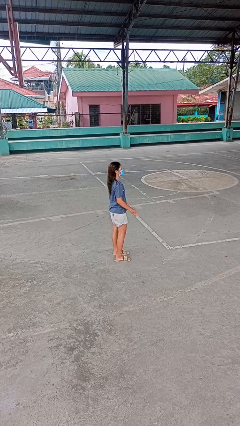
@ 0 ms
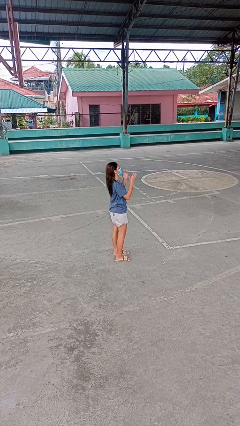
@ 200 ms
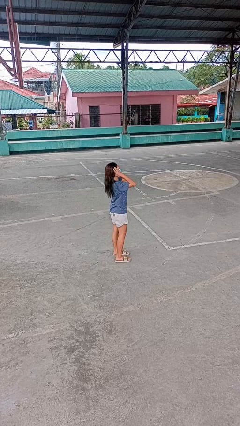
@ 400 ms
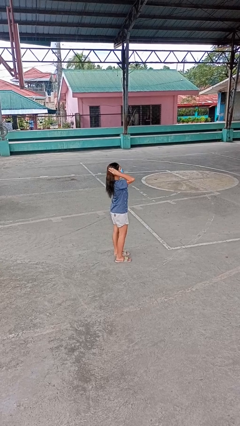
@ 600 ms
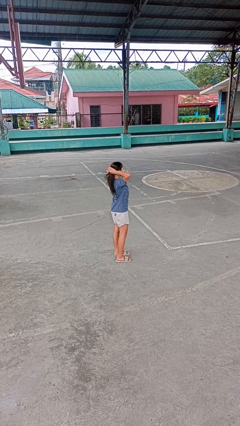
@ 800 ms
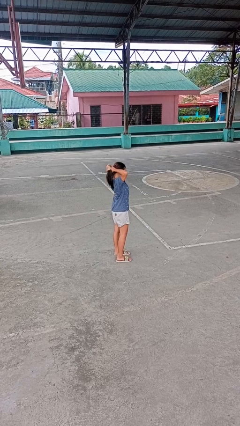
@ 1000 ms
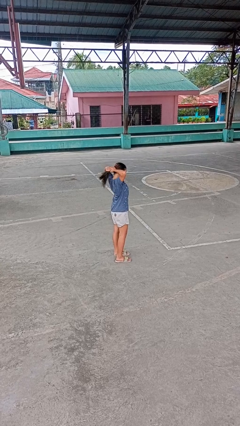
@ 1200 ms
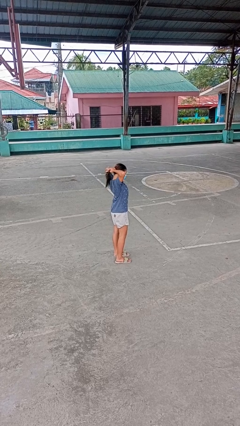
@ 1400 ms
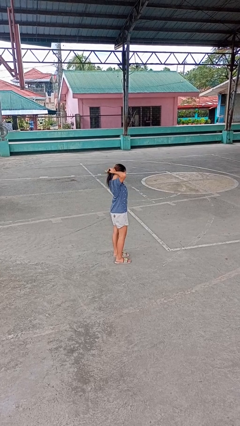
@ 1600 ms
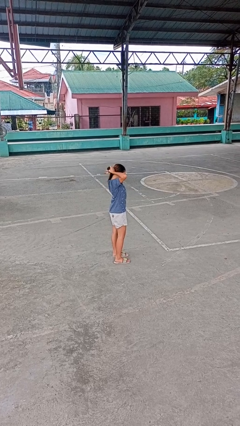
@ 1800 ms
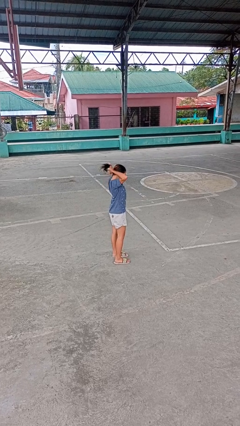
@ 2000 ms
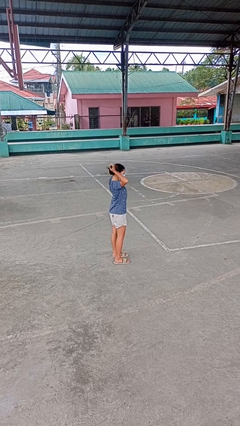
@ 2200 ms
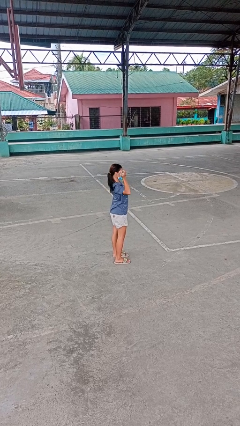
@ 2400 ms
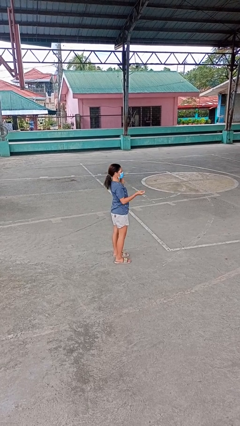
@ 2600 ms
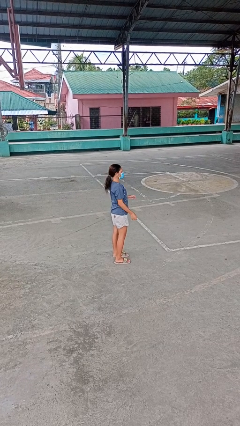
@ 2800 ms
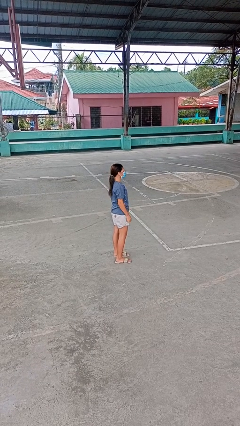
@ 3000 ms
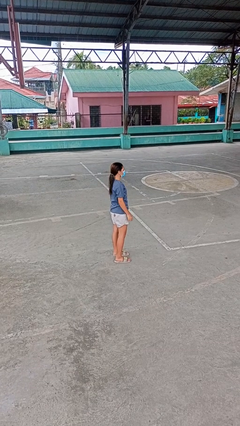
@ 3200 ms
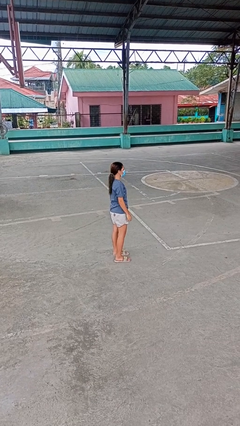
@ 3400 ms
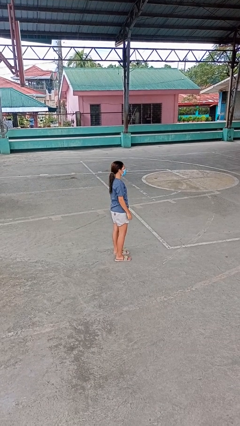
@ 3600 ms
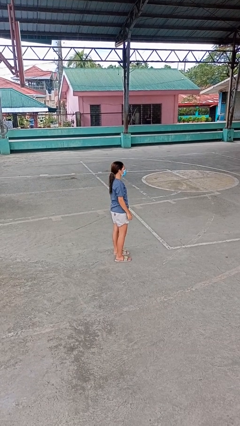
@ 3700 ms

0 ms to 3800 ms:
person puts hair in ponytail

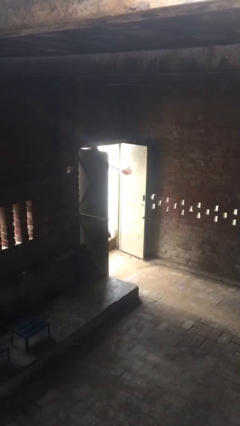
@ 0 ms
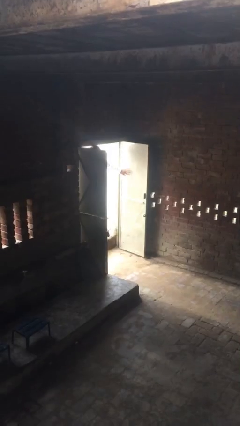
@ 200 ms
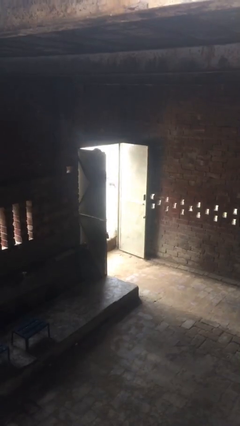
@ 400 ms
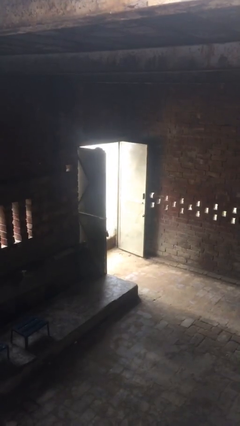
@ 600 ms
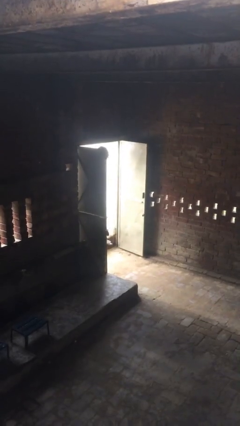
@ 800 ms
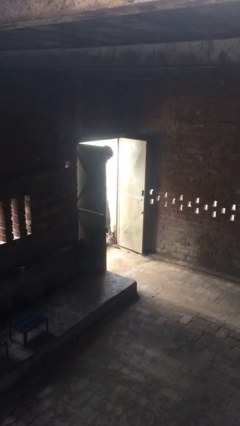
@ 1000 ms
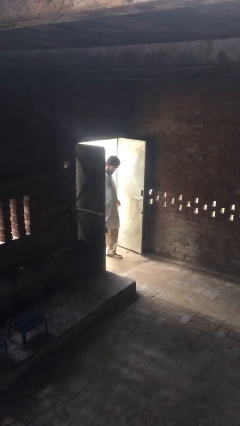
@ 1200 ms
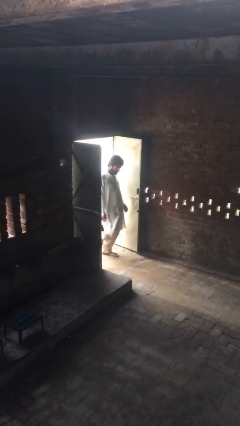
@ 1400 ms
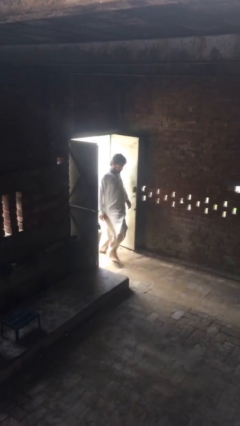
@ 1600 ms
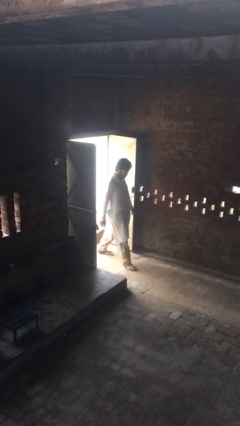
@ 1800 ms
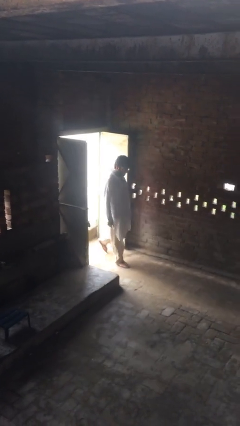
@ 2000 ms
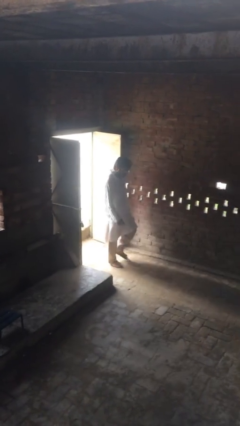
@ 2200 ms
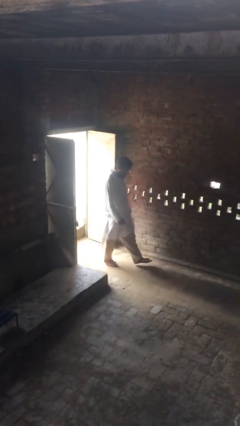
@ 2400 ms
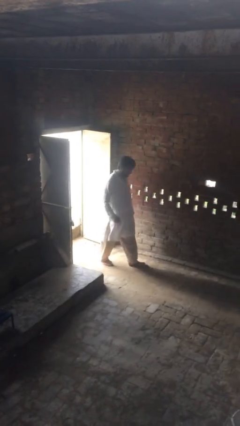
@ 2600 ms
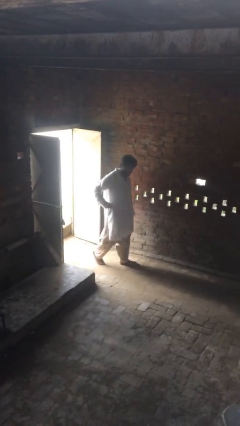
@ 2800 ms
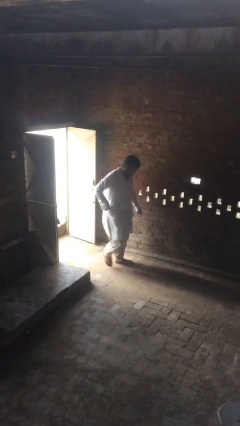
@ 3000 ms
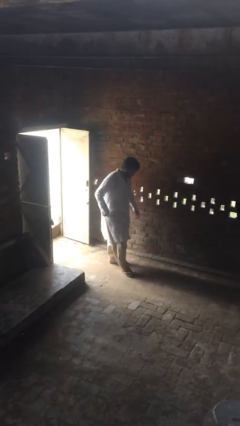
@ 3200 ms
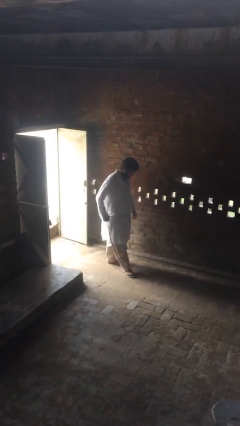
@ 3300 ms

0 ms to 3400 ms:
person enters scene through structure

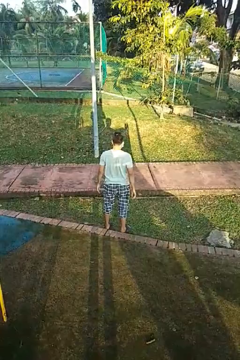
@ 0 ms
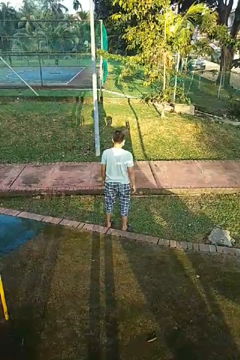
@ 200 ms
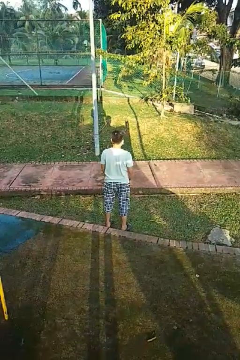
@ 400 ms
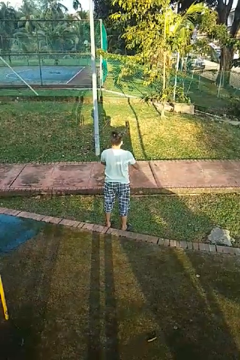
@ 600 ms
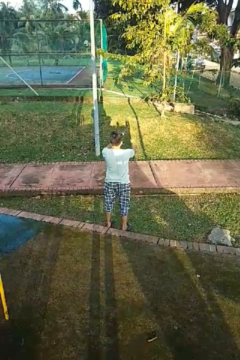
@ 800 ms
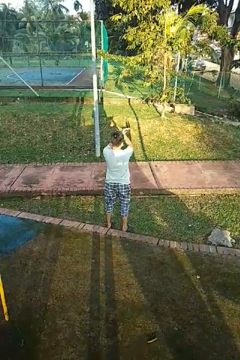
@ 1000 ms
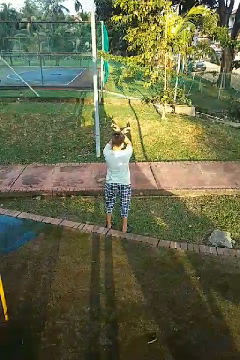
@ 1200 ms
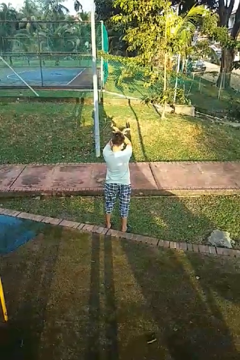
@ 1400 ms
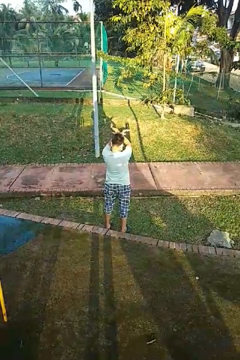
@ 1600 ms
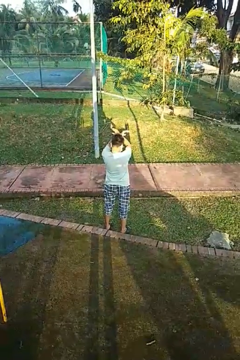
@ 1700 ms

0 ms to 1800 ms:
person gestures arms x

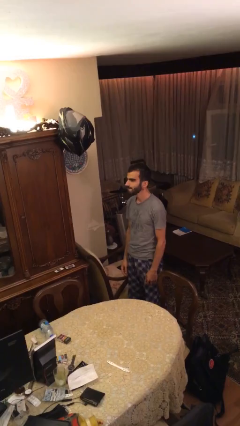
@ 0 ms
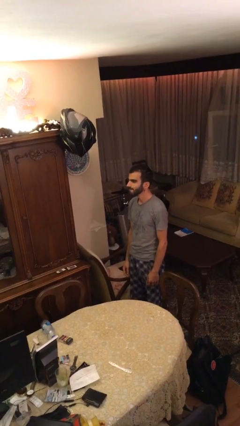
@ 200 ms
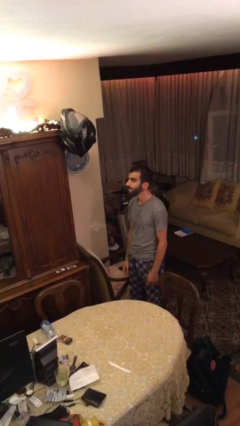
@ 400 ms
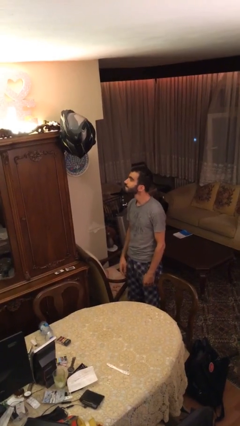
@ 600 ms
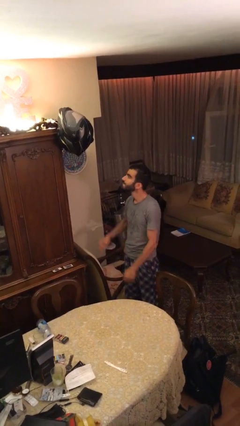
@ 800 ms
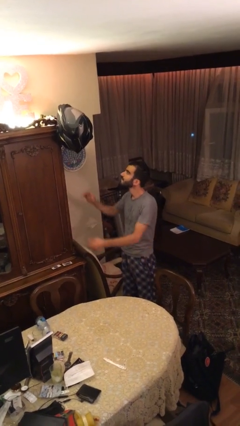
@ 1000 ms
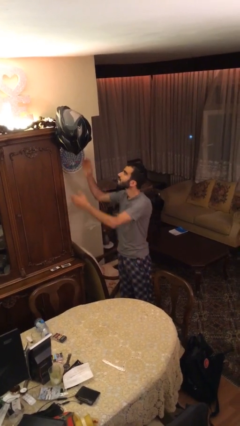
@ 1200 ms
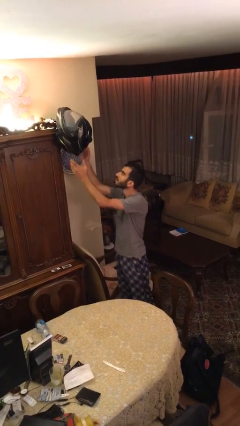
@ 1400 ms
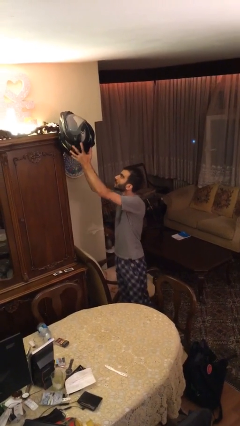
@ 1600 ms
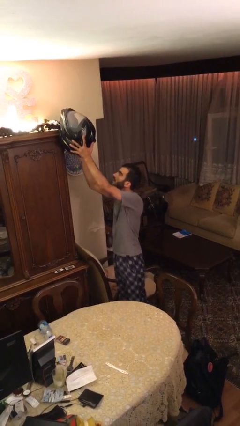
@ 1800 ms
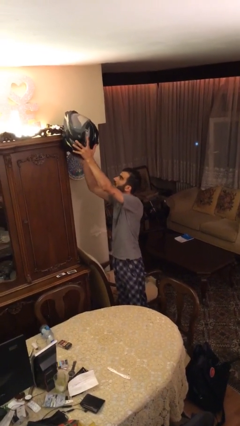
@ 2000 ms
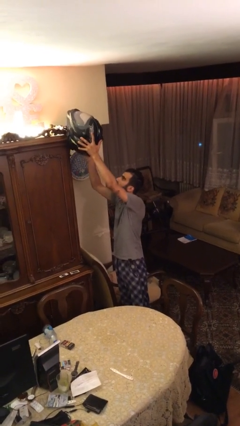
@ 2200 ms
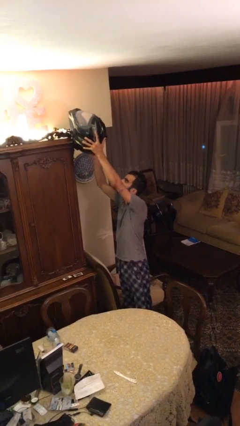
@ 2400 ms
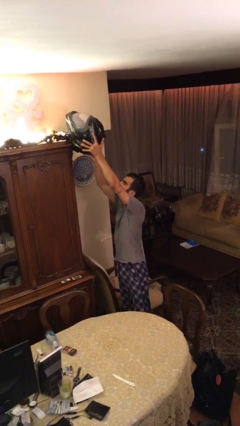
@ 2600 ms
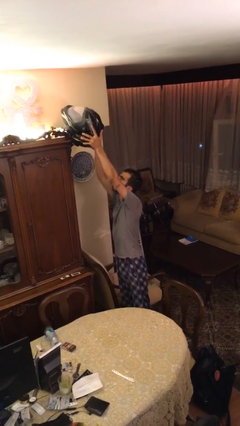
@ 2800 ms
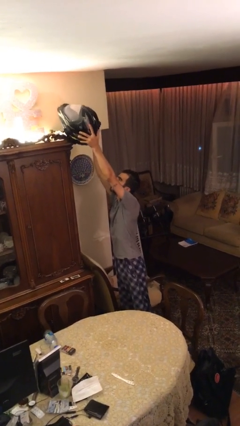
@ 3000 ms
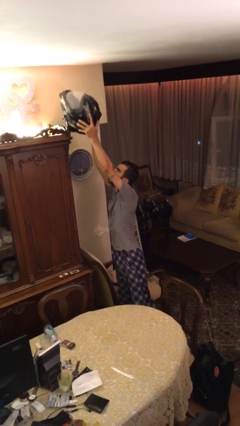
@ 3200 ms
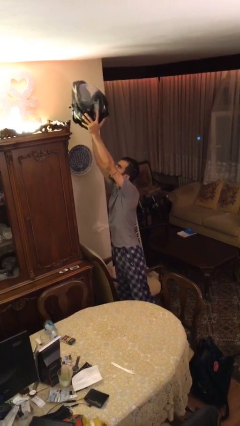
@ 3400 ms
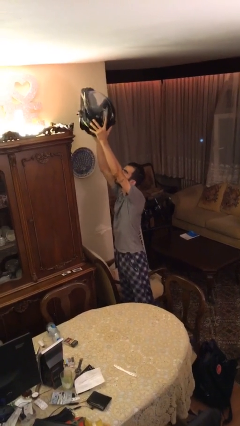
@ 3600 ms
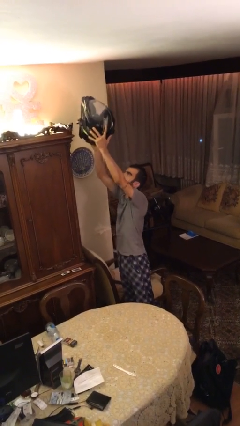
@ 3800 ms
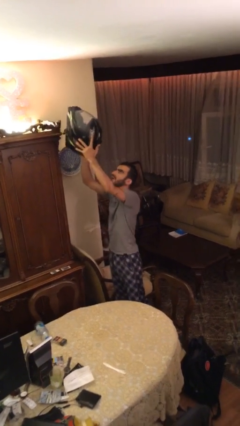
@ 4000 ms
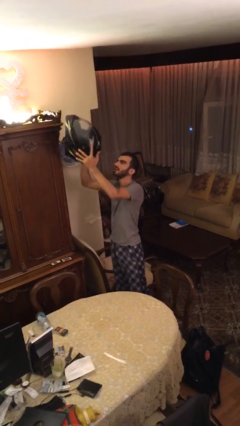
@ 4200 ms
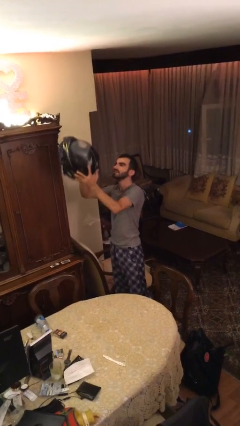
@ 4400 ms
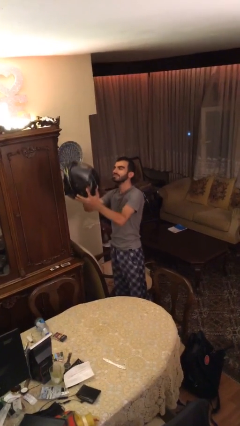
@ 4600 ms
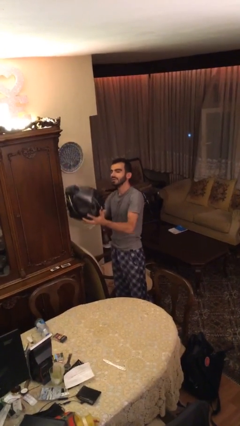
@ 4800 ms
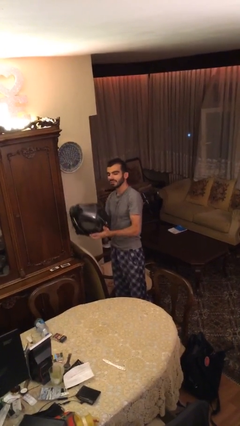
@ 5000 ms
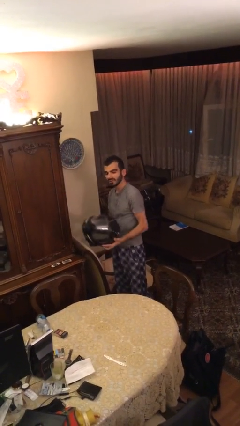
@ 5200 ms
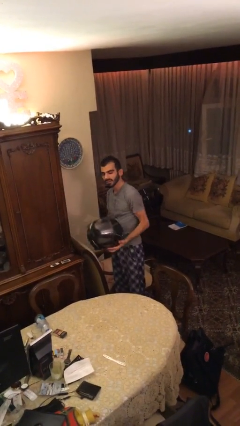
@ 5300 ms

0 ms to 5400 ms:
person picks up object from shelf

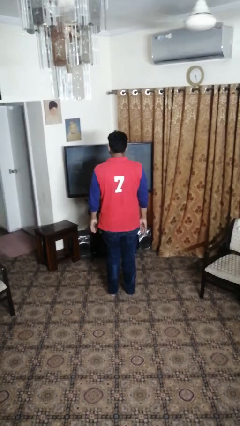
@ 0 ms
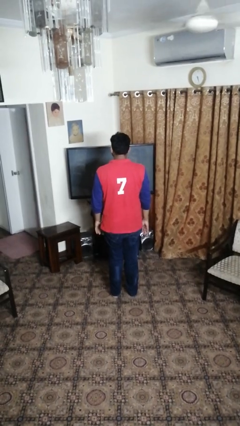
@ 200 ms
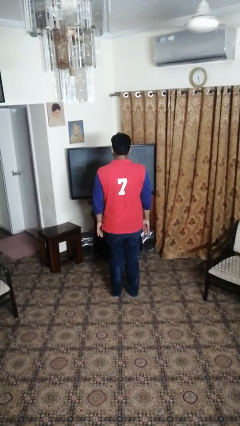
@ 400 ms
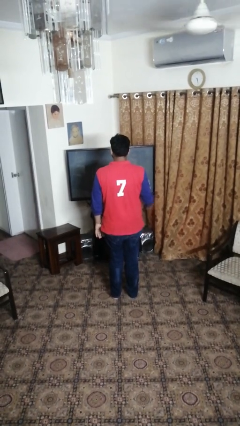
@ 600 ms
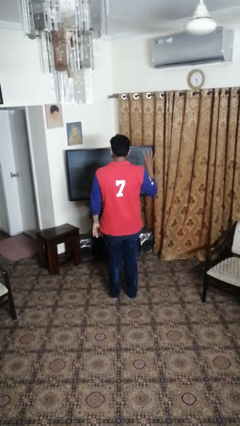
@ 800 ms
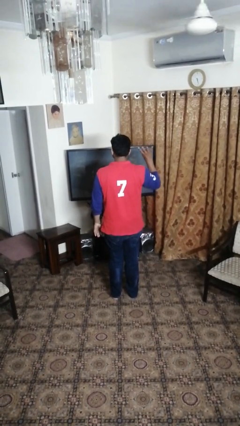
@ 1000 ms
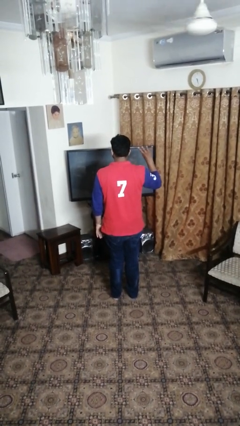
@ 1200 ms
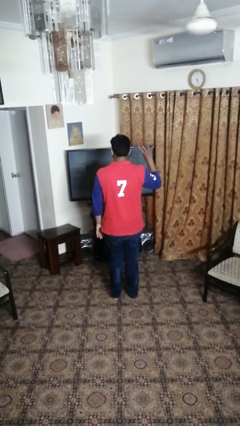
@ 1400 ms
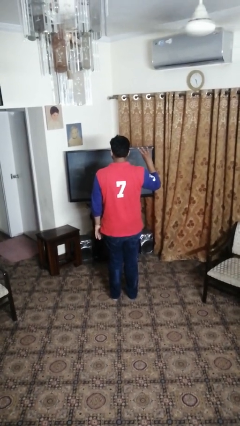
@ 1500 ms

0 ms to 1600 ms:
person gestures number four

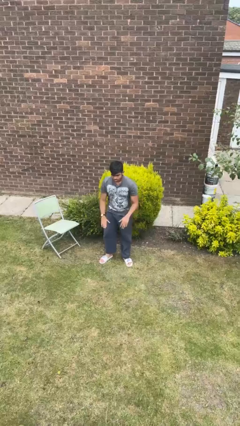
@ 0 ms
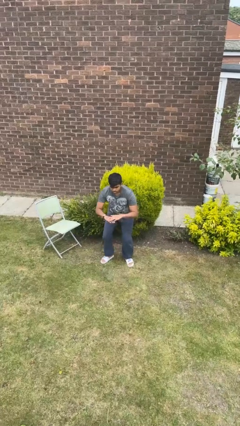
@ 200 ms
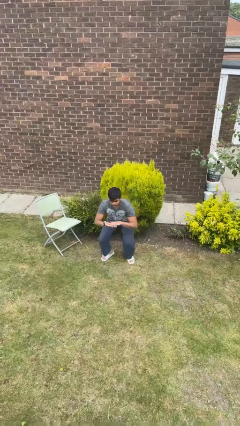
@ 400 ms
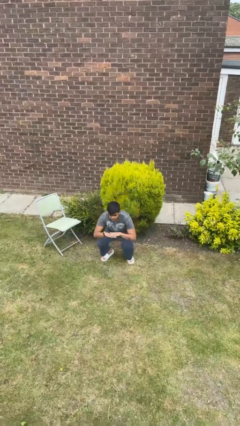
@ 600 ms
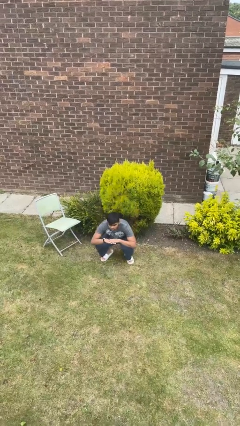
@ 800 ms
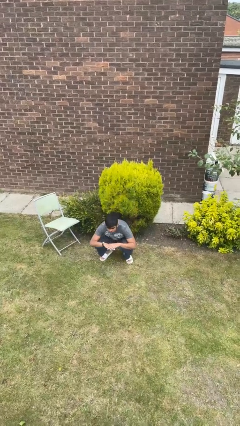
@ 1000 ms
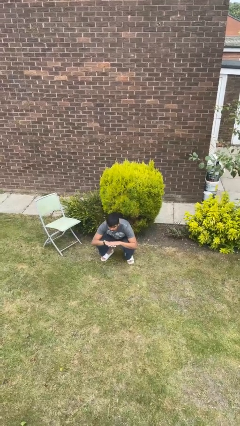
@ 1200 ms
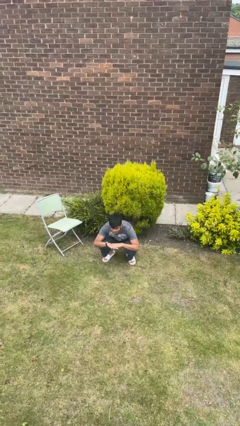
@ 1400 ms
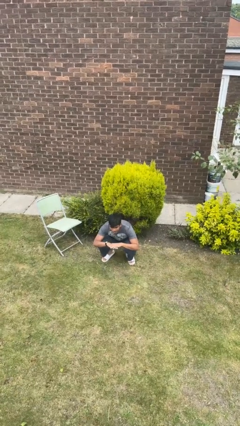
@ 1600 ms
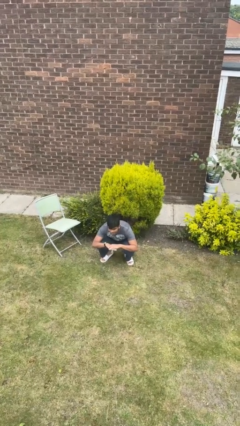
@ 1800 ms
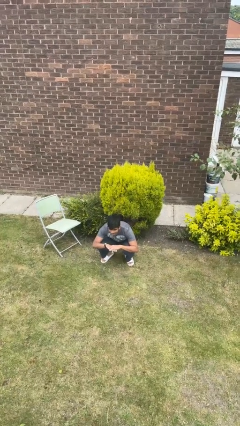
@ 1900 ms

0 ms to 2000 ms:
person squats
